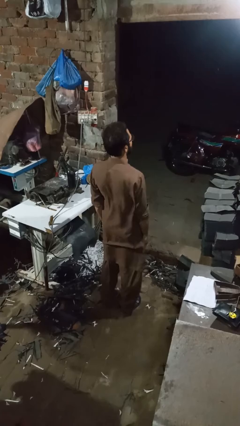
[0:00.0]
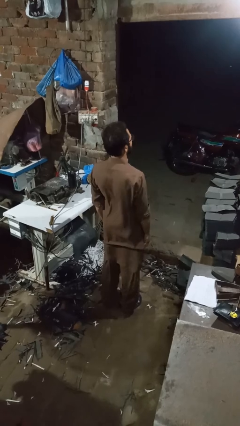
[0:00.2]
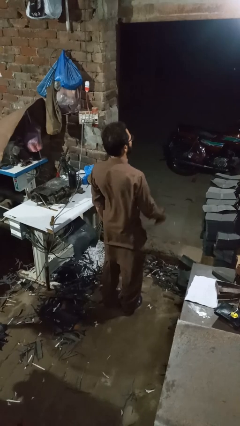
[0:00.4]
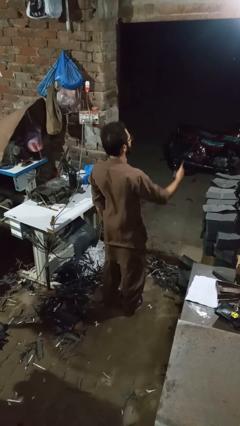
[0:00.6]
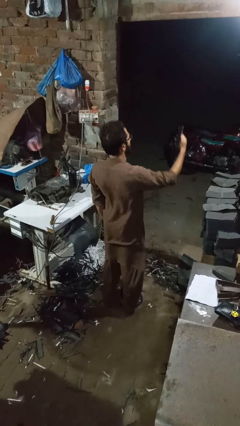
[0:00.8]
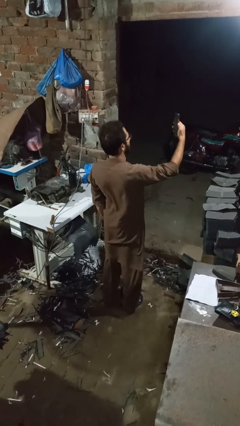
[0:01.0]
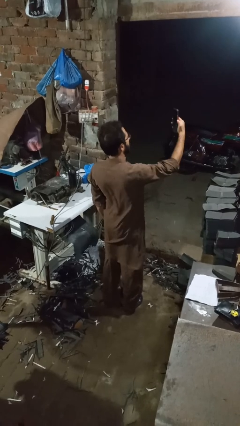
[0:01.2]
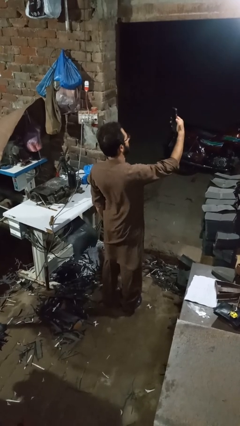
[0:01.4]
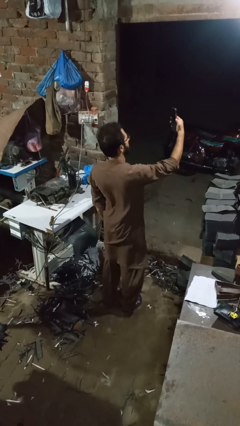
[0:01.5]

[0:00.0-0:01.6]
person takes selfie

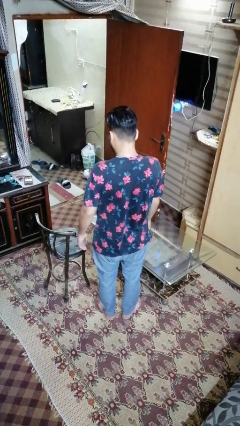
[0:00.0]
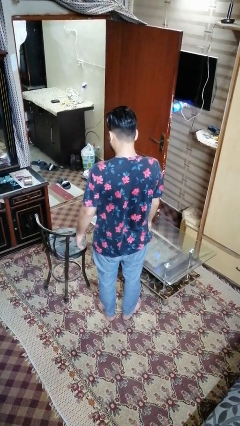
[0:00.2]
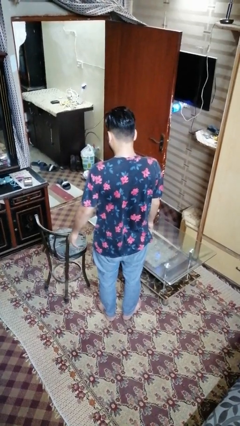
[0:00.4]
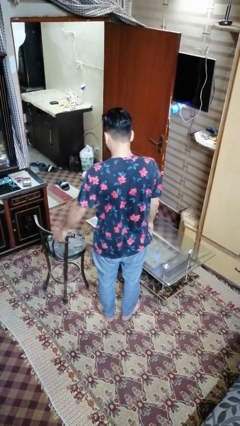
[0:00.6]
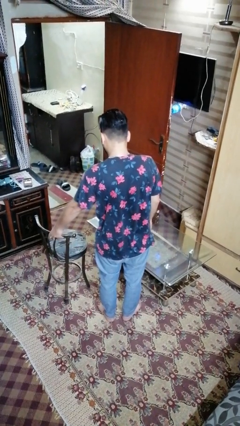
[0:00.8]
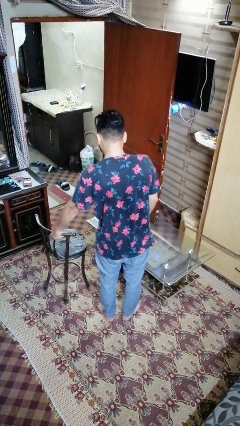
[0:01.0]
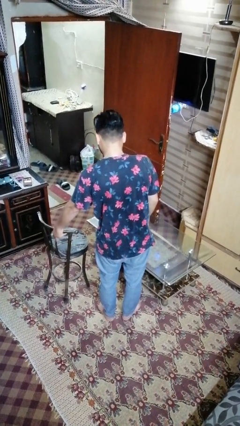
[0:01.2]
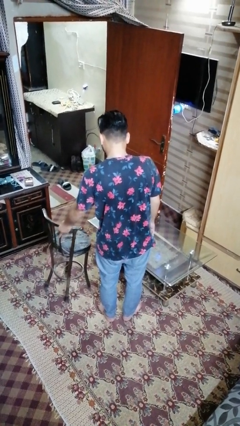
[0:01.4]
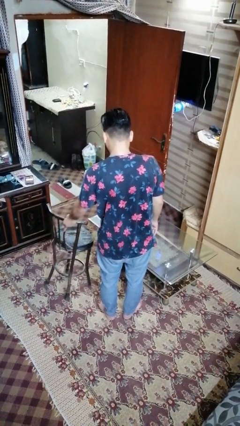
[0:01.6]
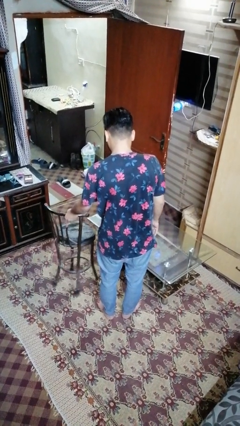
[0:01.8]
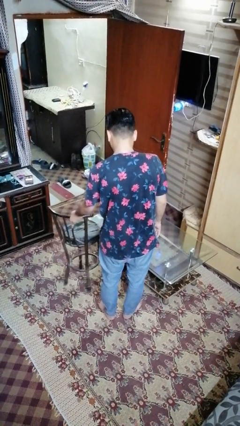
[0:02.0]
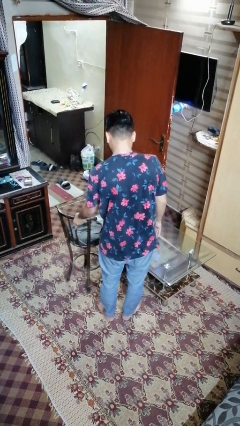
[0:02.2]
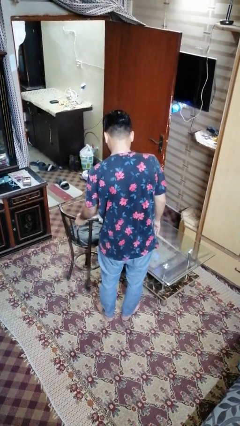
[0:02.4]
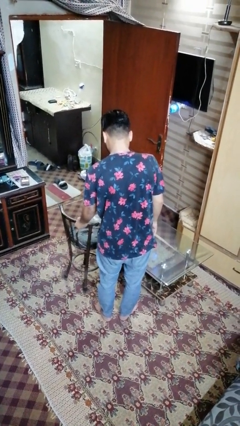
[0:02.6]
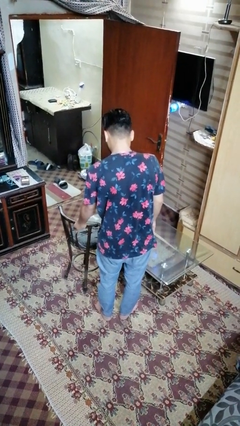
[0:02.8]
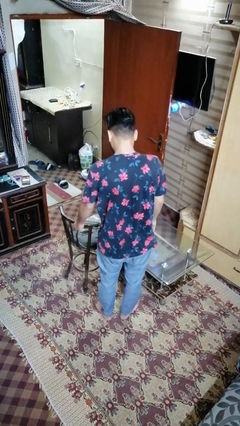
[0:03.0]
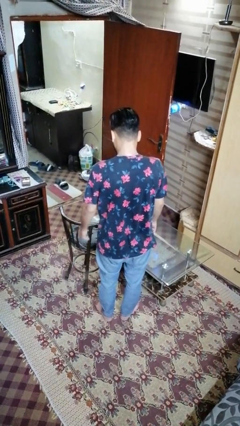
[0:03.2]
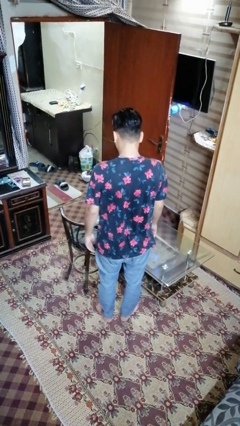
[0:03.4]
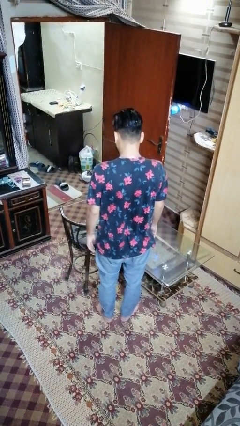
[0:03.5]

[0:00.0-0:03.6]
person pushes in chair

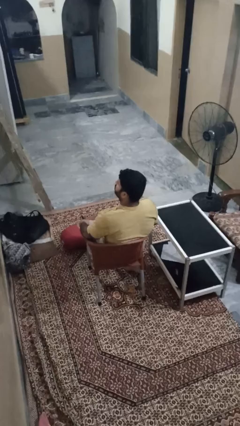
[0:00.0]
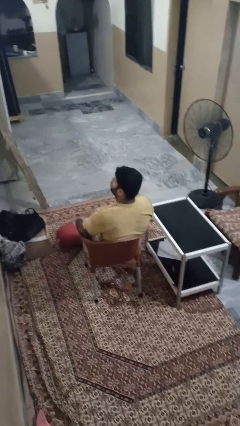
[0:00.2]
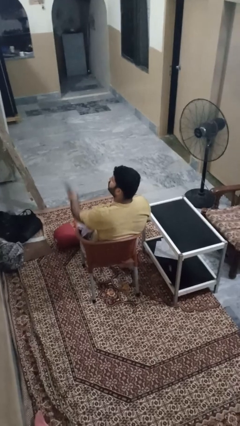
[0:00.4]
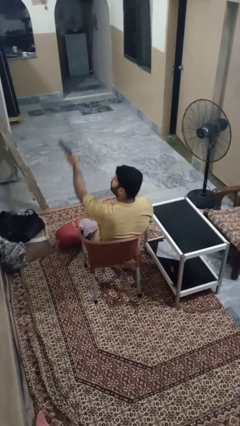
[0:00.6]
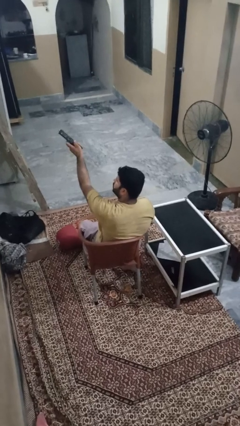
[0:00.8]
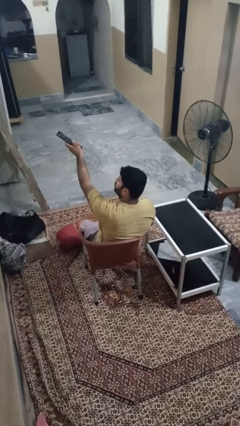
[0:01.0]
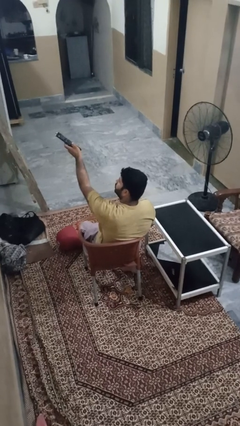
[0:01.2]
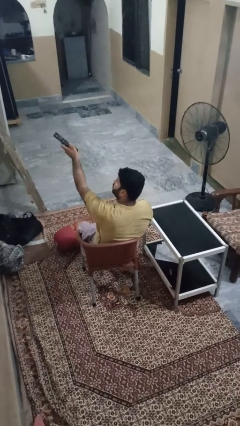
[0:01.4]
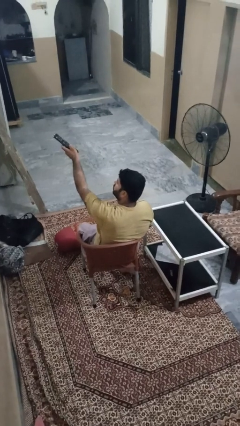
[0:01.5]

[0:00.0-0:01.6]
person uses television remote

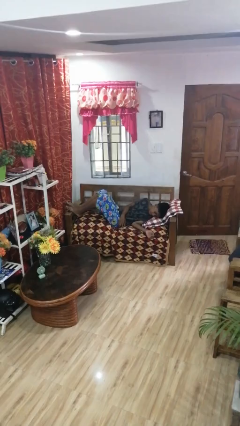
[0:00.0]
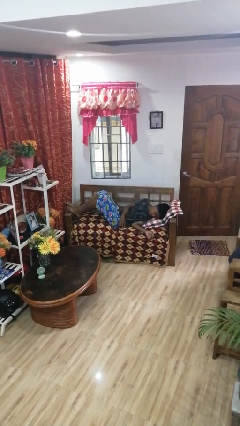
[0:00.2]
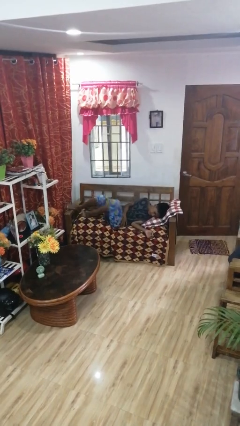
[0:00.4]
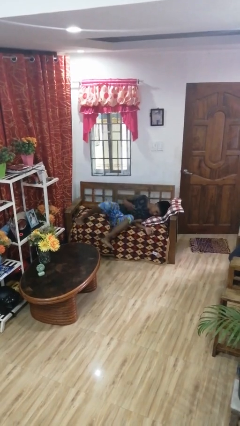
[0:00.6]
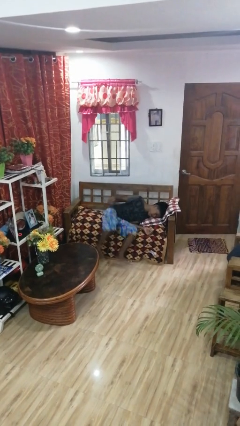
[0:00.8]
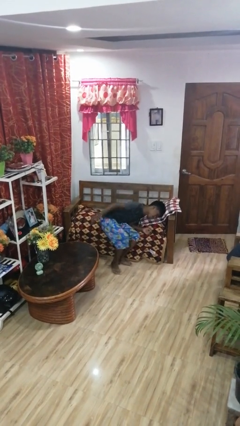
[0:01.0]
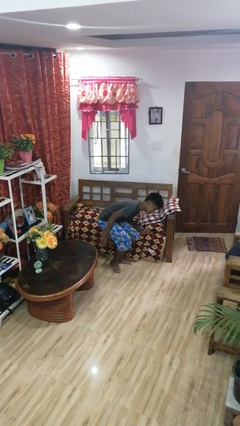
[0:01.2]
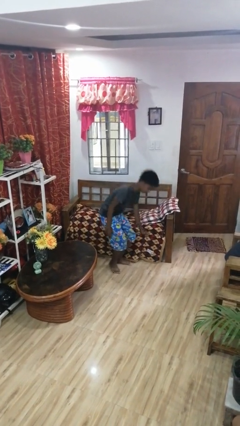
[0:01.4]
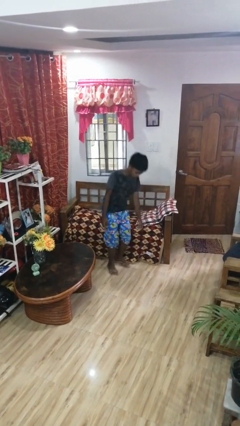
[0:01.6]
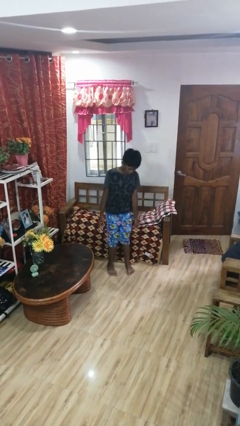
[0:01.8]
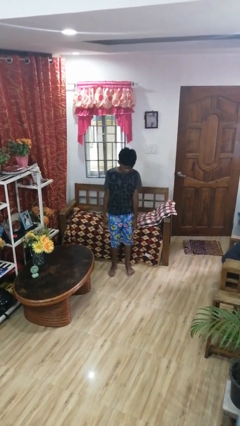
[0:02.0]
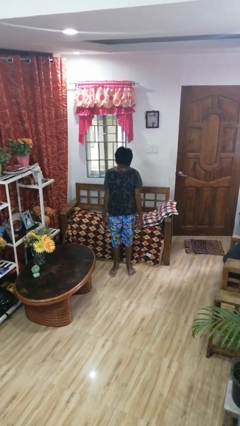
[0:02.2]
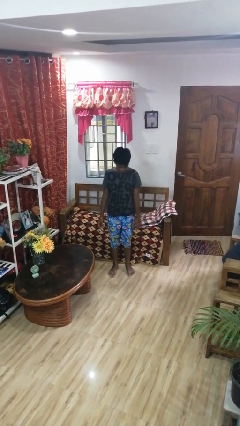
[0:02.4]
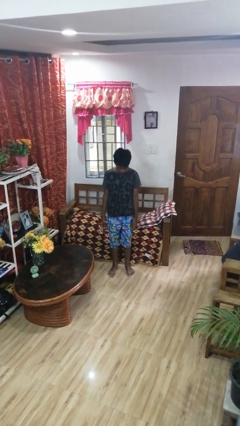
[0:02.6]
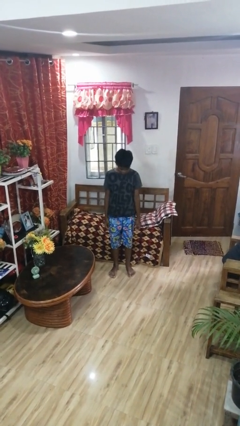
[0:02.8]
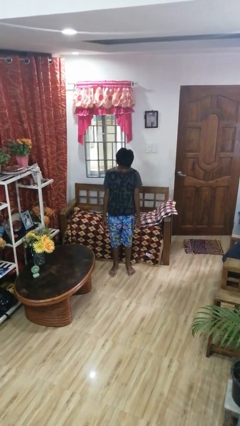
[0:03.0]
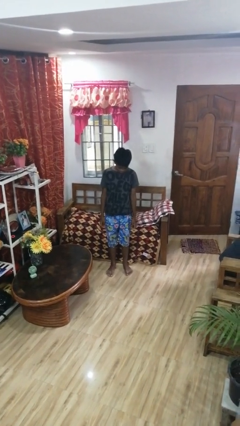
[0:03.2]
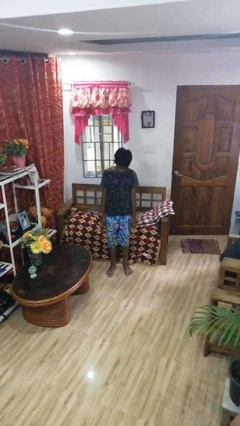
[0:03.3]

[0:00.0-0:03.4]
person stands up

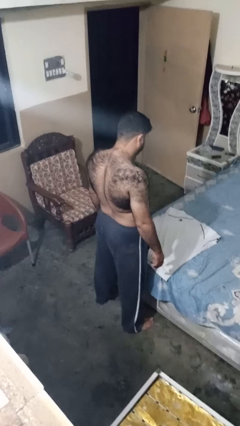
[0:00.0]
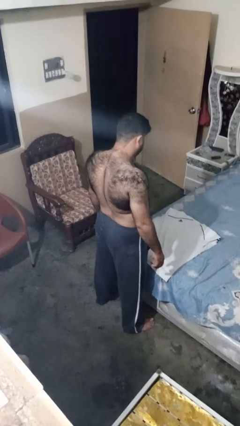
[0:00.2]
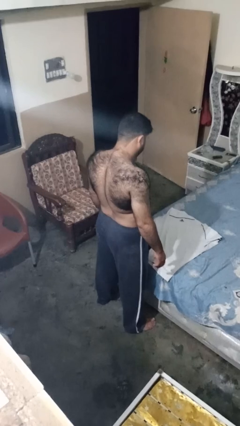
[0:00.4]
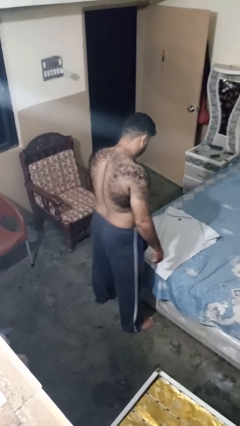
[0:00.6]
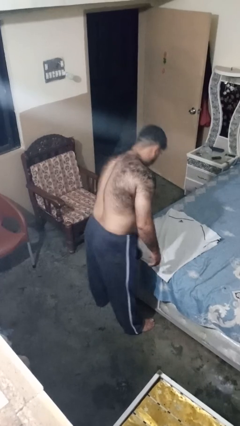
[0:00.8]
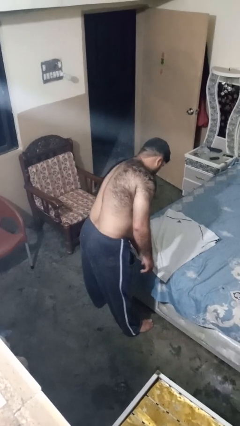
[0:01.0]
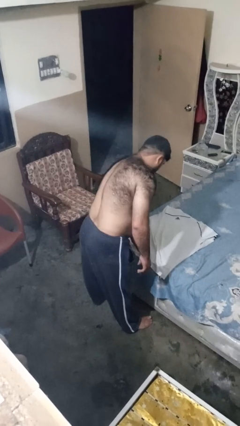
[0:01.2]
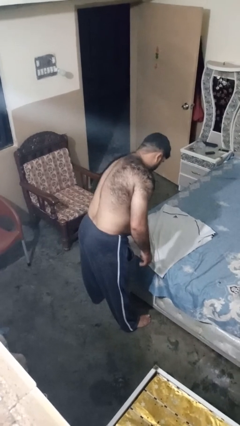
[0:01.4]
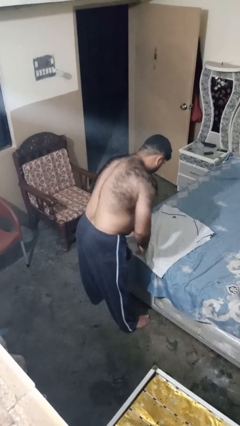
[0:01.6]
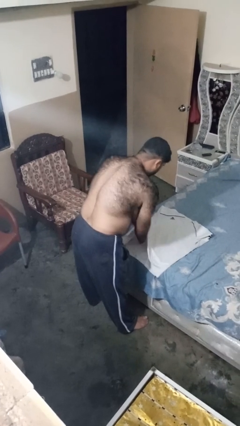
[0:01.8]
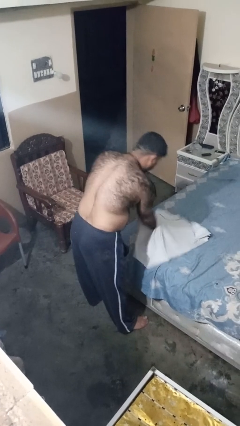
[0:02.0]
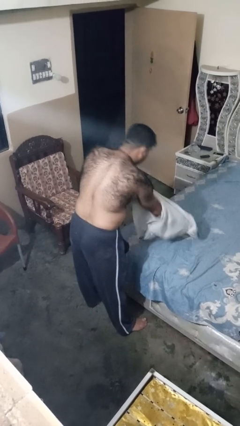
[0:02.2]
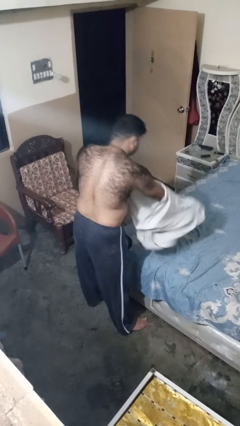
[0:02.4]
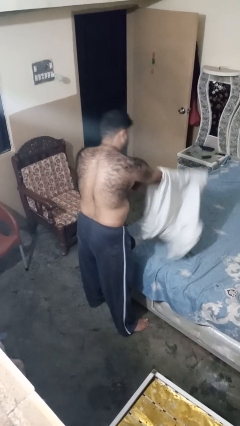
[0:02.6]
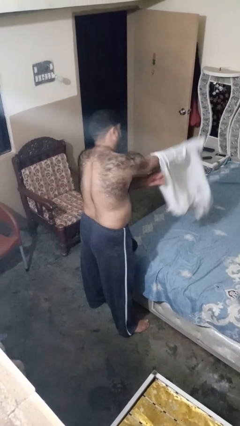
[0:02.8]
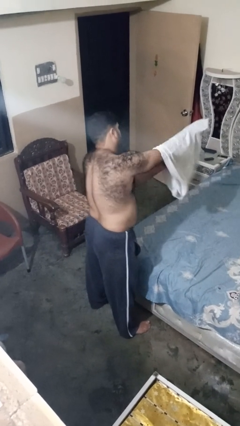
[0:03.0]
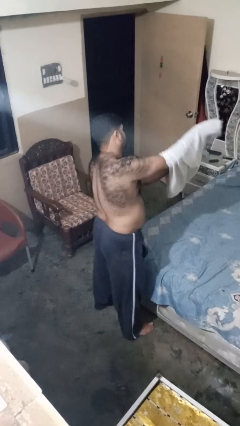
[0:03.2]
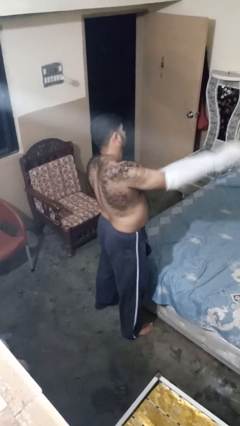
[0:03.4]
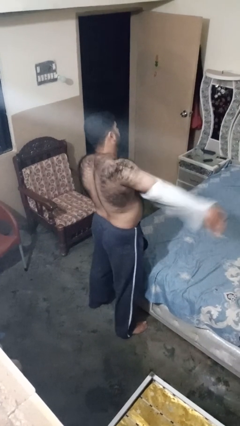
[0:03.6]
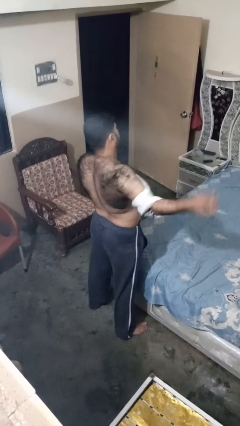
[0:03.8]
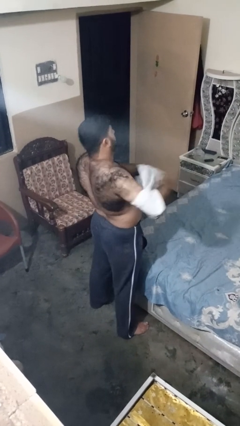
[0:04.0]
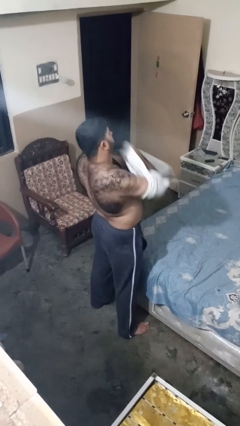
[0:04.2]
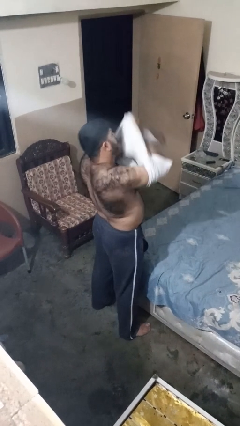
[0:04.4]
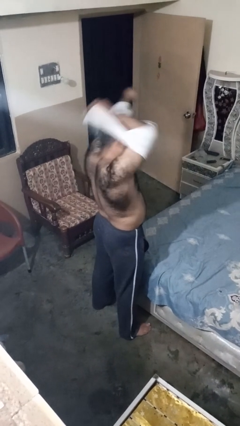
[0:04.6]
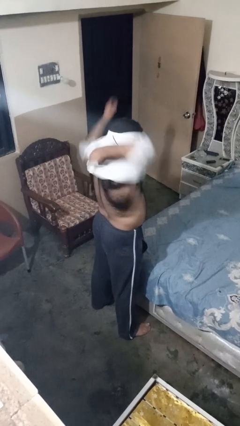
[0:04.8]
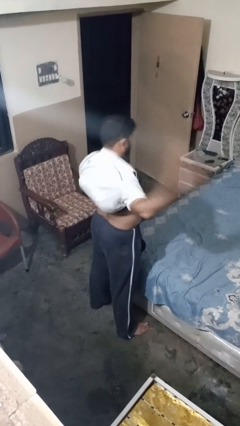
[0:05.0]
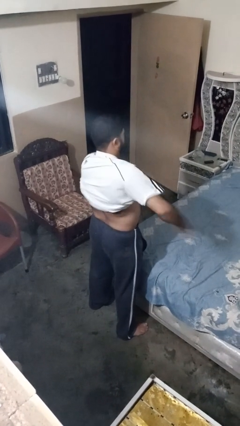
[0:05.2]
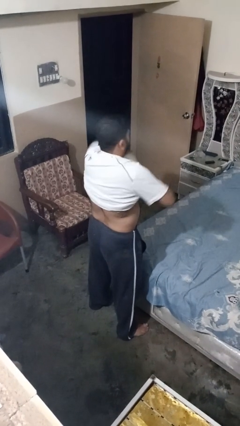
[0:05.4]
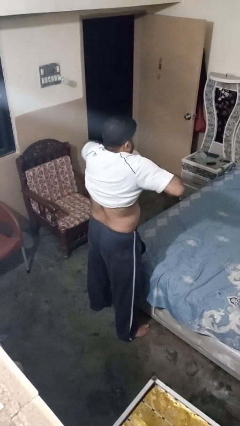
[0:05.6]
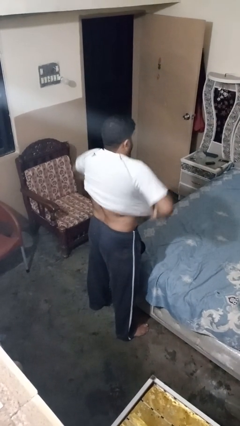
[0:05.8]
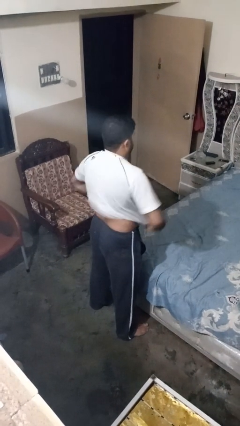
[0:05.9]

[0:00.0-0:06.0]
person puts on shirt

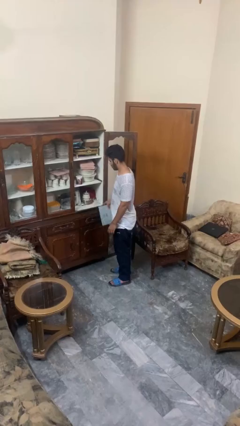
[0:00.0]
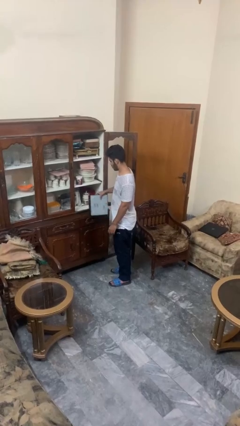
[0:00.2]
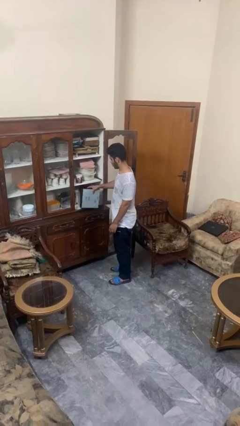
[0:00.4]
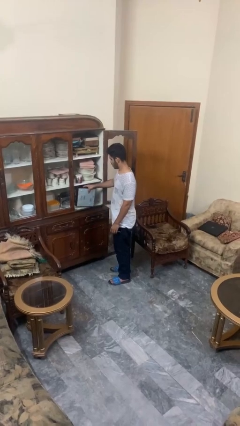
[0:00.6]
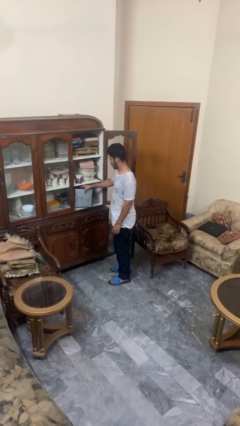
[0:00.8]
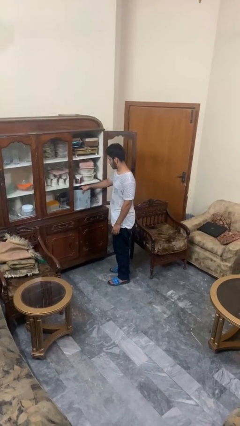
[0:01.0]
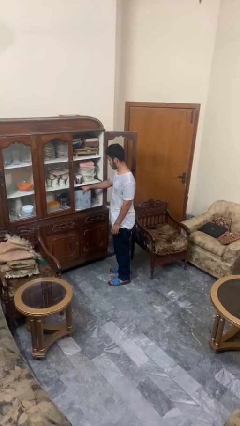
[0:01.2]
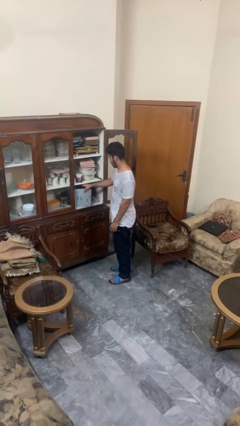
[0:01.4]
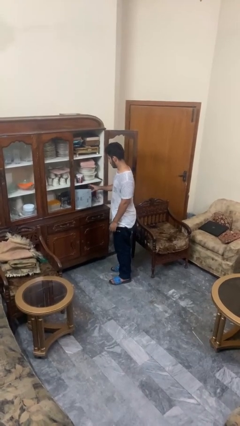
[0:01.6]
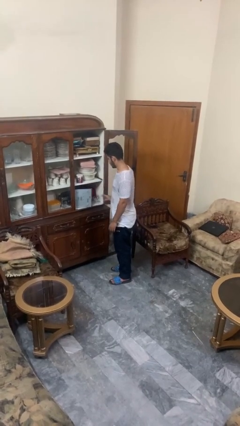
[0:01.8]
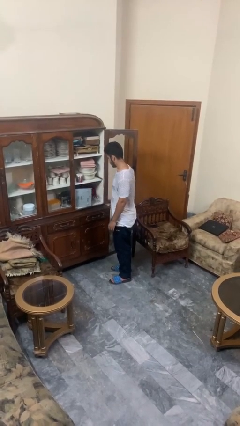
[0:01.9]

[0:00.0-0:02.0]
person puts down object into cabinet
